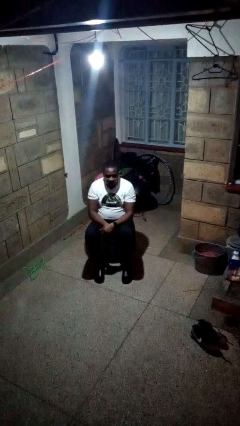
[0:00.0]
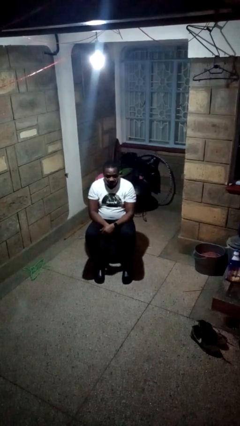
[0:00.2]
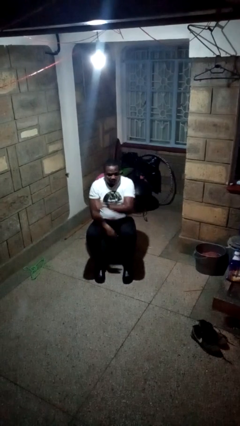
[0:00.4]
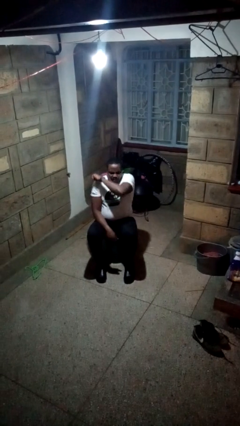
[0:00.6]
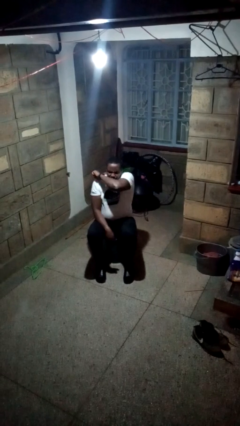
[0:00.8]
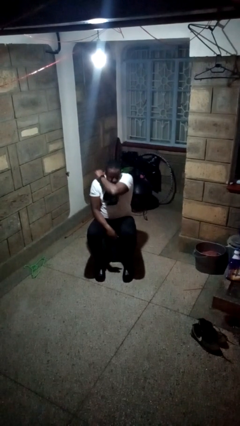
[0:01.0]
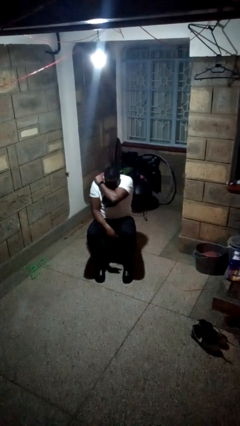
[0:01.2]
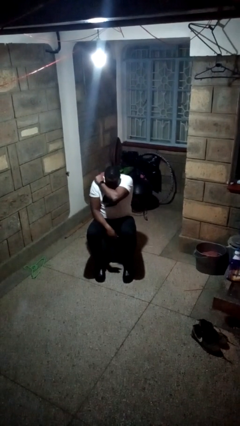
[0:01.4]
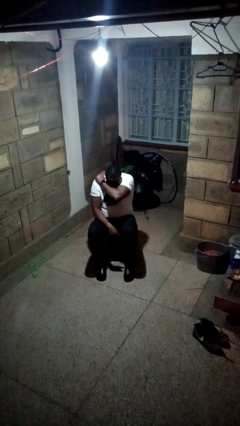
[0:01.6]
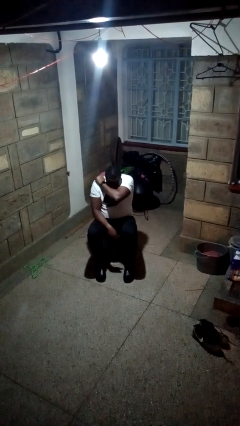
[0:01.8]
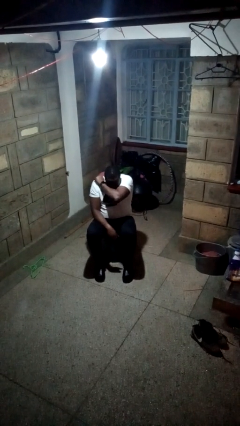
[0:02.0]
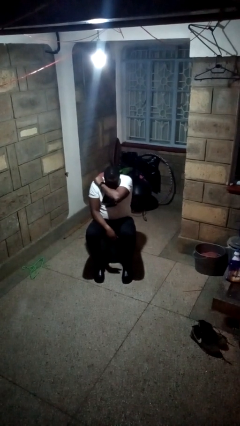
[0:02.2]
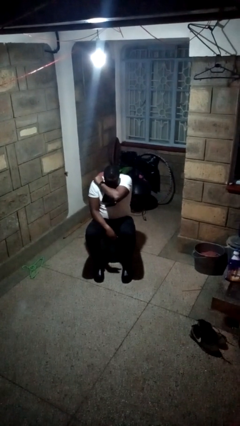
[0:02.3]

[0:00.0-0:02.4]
person sneezes into arm

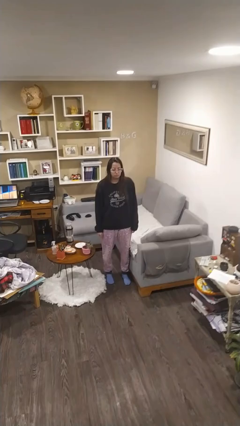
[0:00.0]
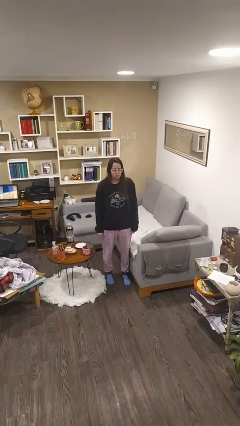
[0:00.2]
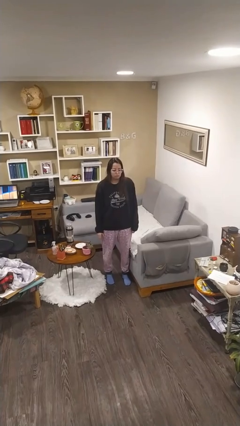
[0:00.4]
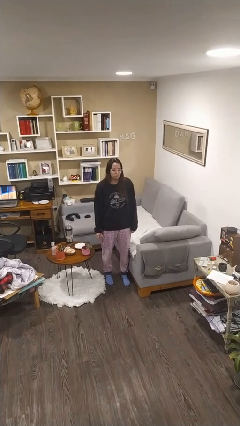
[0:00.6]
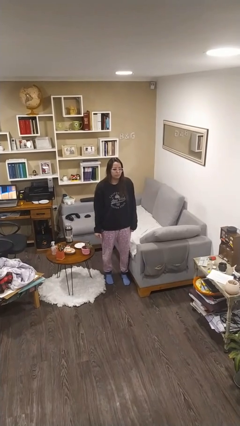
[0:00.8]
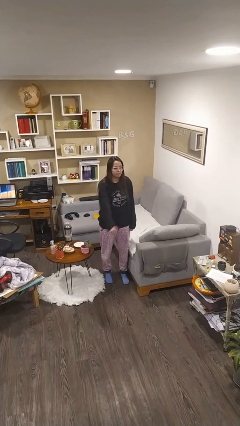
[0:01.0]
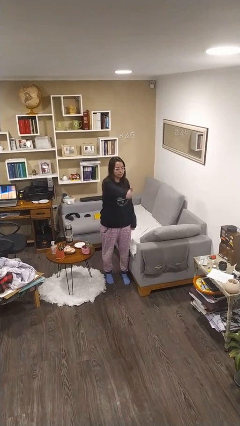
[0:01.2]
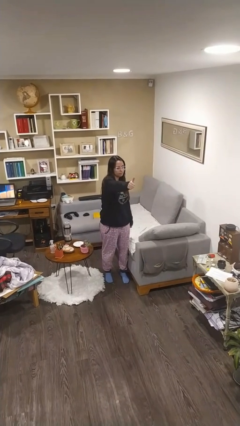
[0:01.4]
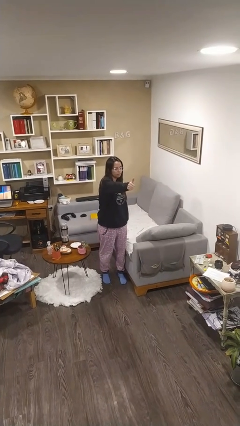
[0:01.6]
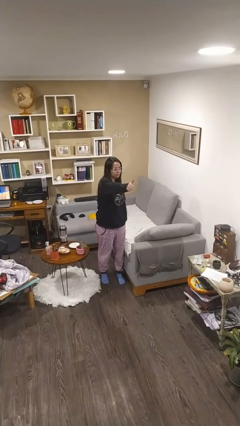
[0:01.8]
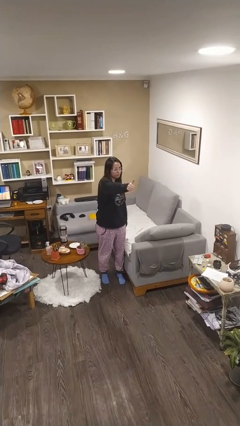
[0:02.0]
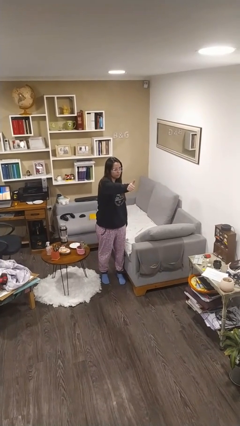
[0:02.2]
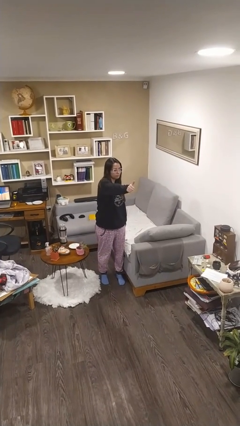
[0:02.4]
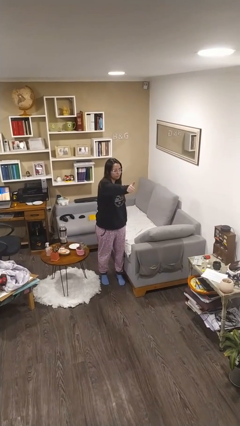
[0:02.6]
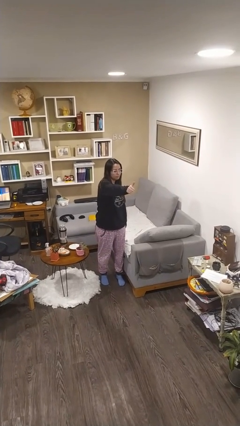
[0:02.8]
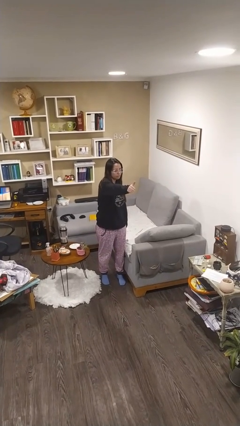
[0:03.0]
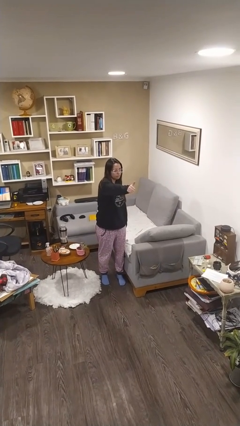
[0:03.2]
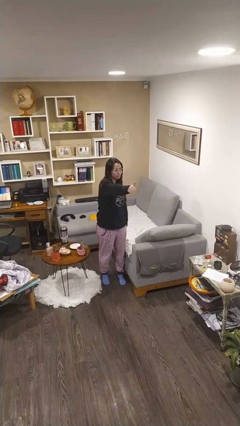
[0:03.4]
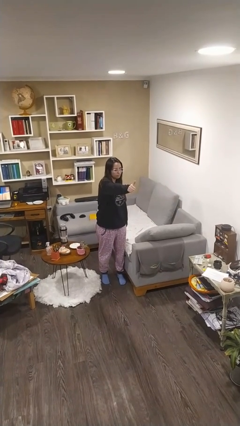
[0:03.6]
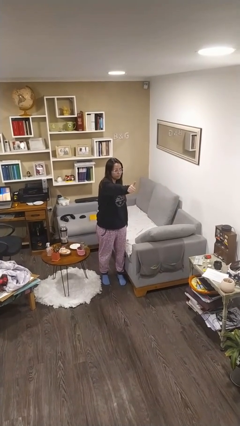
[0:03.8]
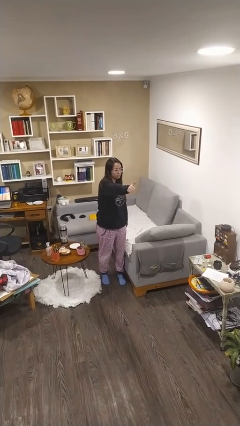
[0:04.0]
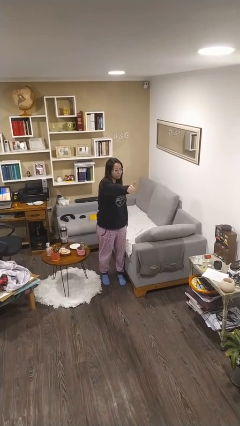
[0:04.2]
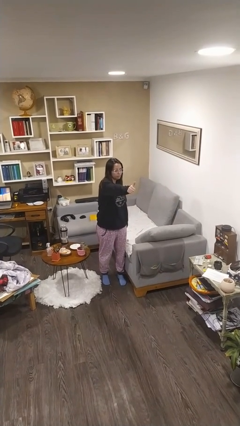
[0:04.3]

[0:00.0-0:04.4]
person gestures thumbs up

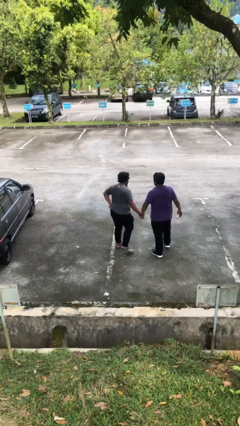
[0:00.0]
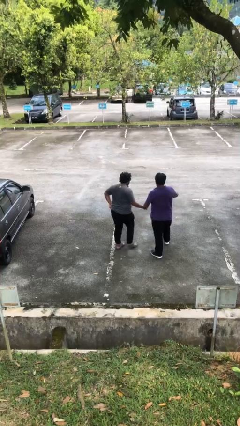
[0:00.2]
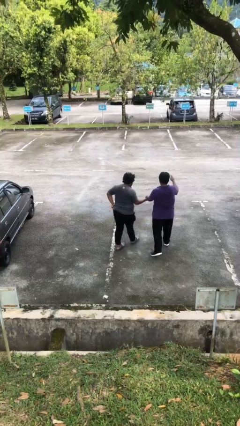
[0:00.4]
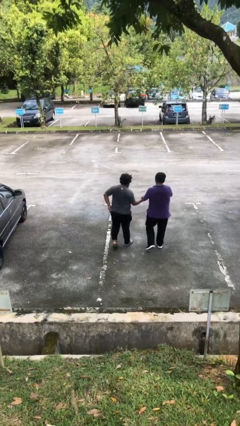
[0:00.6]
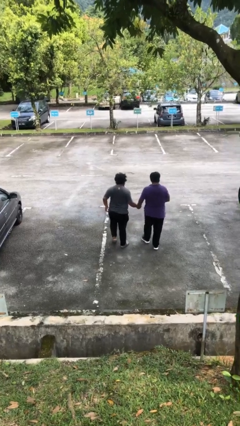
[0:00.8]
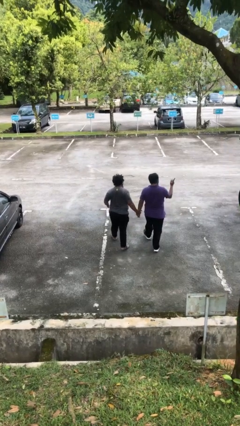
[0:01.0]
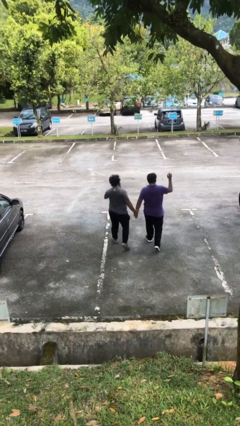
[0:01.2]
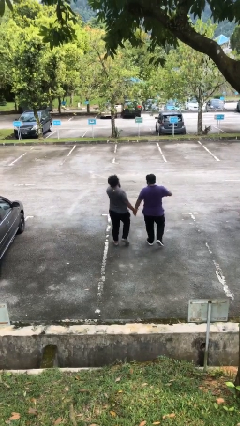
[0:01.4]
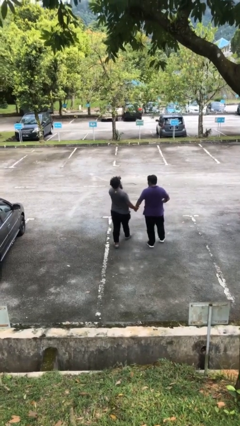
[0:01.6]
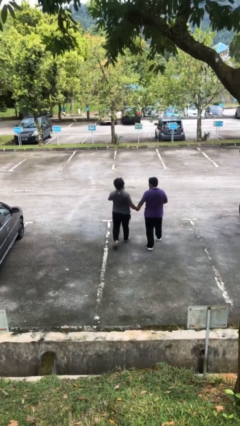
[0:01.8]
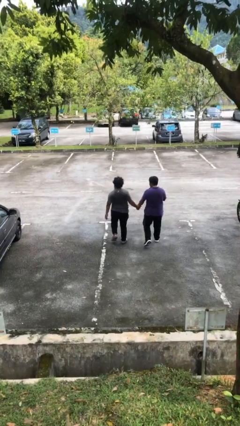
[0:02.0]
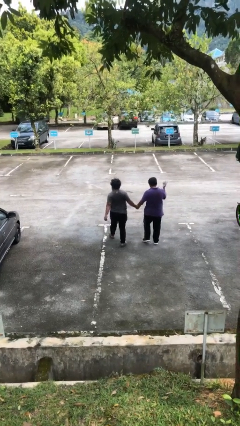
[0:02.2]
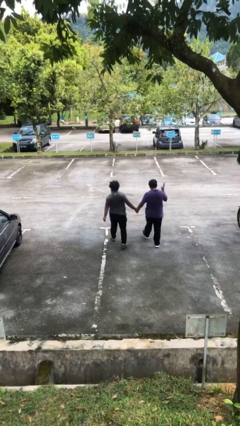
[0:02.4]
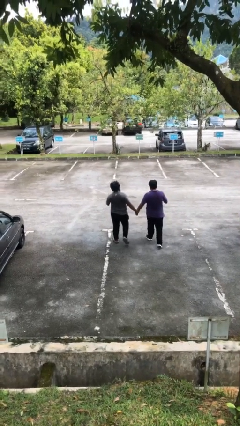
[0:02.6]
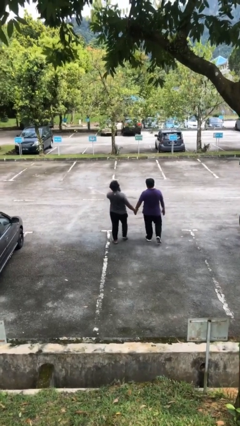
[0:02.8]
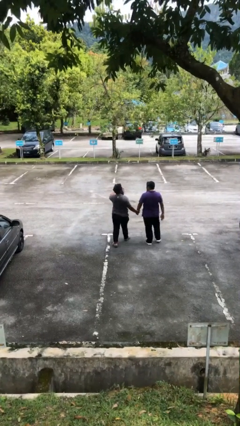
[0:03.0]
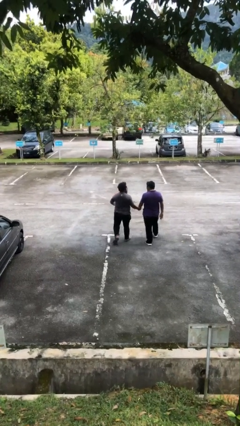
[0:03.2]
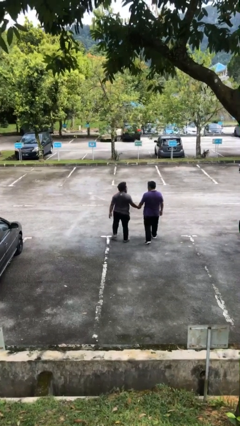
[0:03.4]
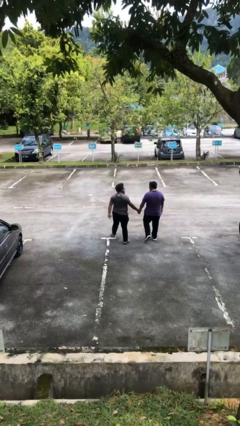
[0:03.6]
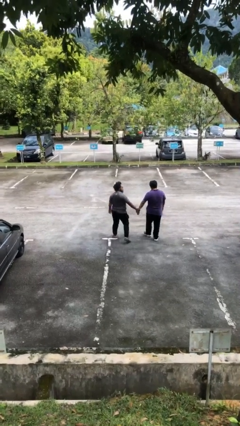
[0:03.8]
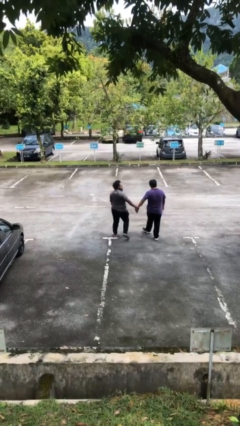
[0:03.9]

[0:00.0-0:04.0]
person holds hand

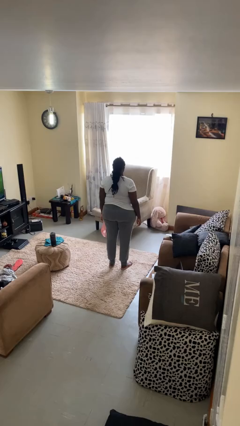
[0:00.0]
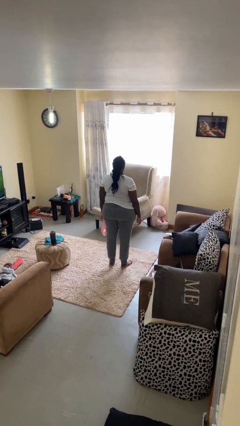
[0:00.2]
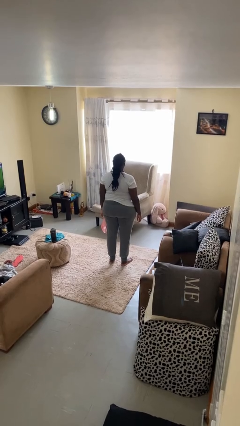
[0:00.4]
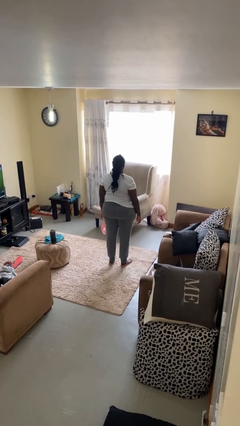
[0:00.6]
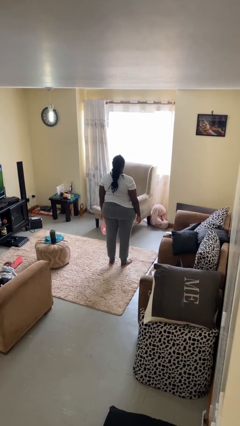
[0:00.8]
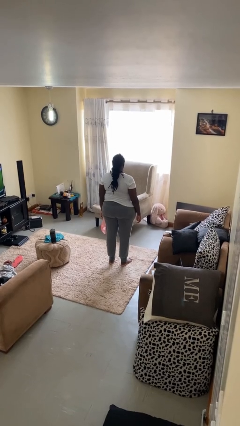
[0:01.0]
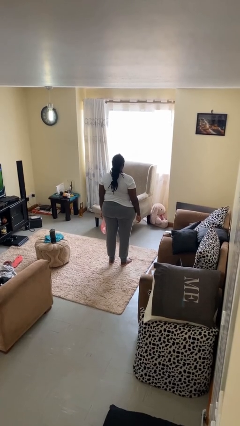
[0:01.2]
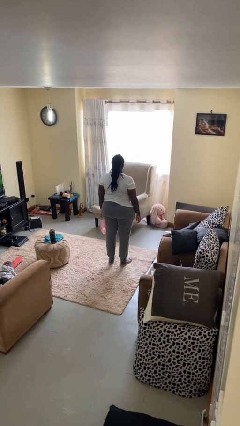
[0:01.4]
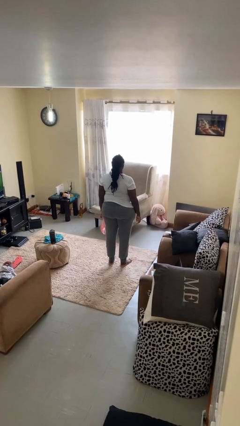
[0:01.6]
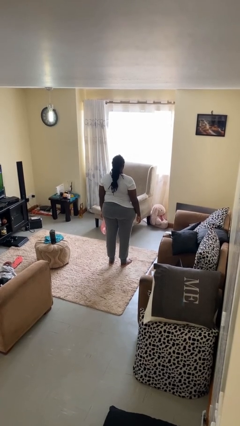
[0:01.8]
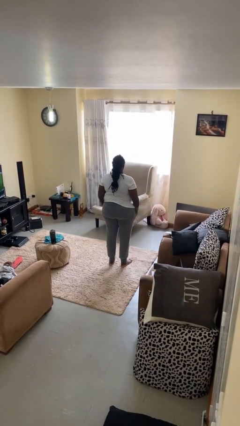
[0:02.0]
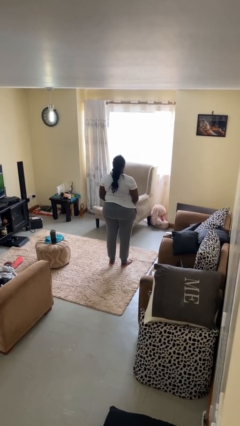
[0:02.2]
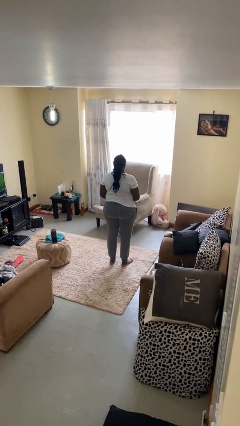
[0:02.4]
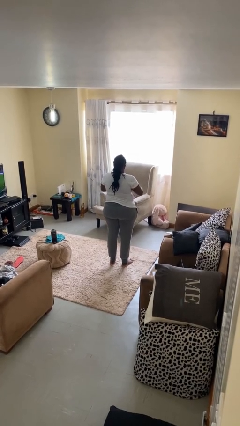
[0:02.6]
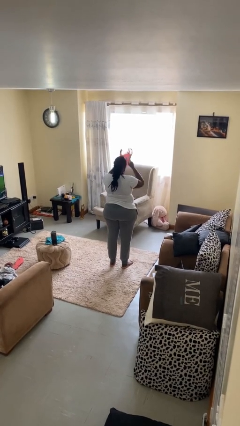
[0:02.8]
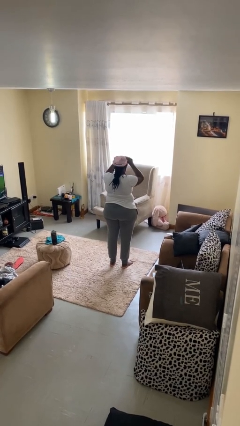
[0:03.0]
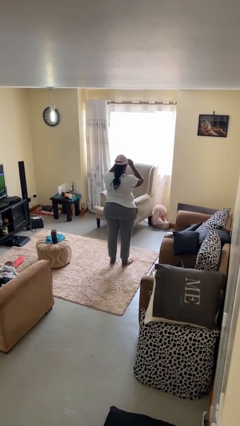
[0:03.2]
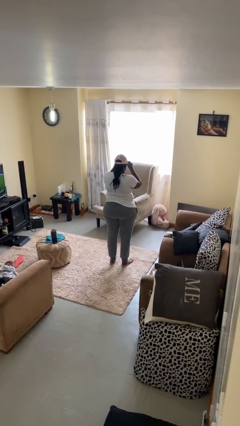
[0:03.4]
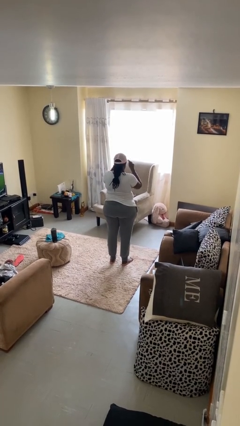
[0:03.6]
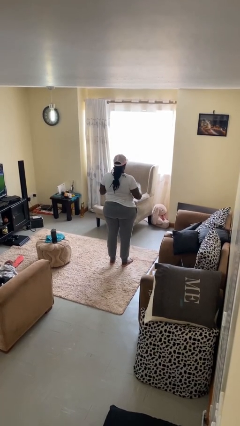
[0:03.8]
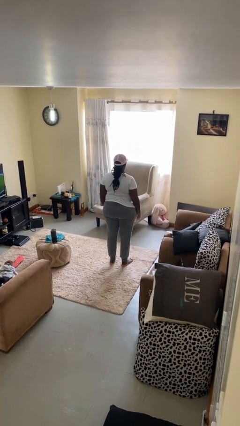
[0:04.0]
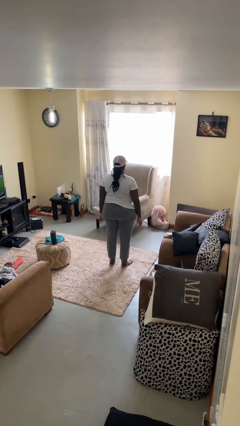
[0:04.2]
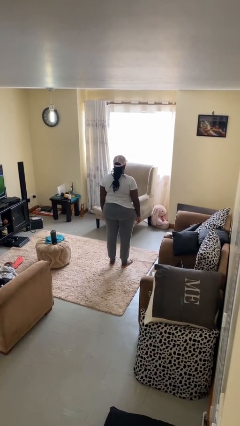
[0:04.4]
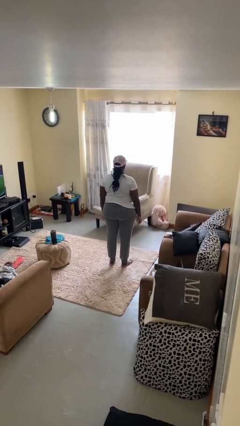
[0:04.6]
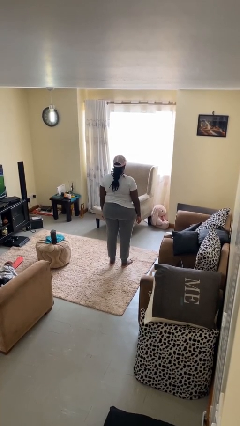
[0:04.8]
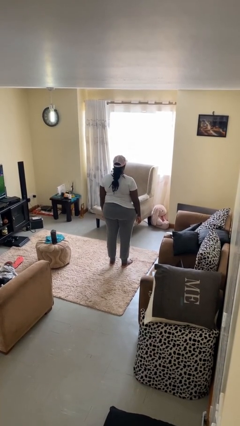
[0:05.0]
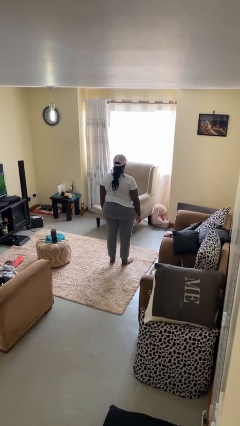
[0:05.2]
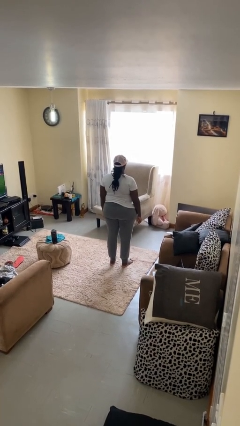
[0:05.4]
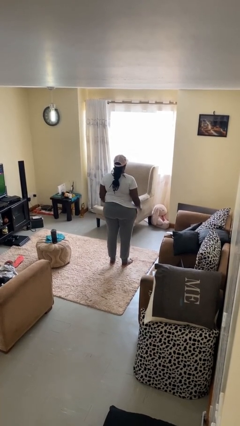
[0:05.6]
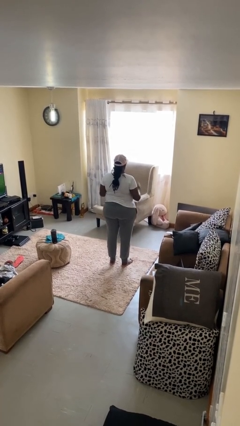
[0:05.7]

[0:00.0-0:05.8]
person puts on hat

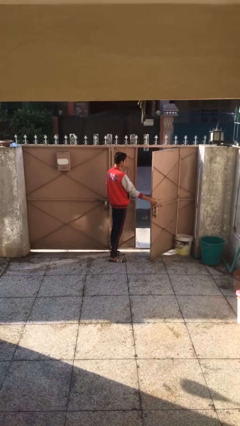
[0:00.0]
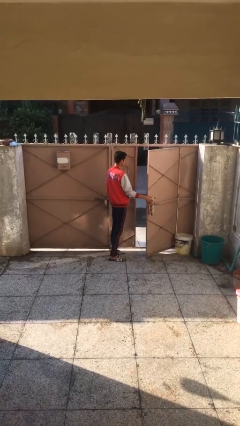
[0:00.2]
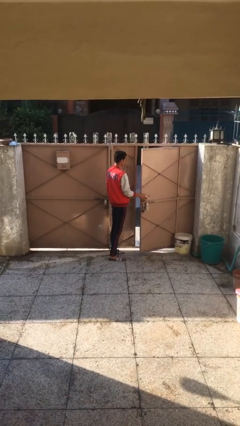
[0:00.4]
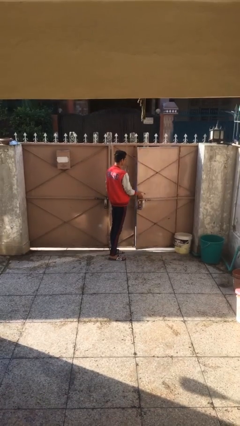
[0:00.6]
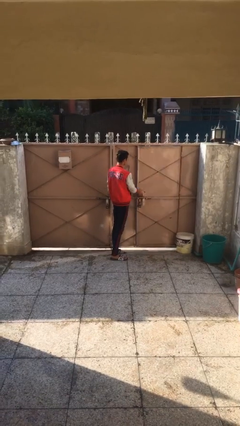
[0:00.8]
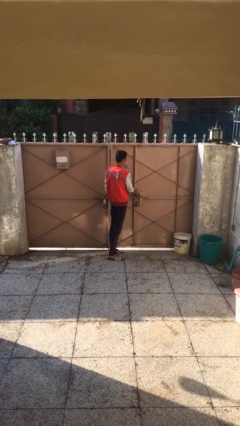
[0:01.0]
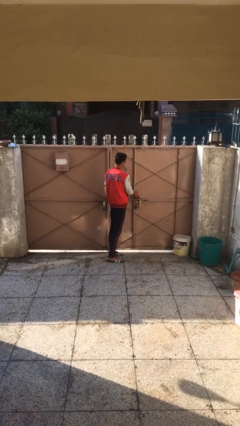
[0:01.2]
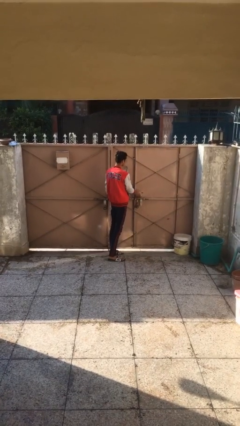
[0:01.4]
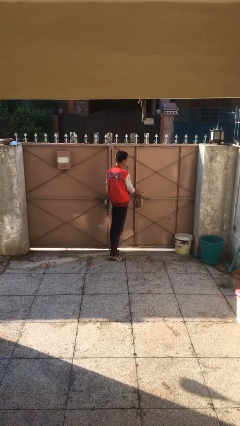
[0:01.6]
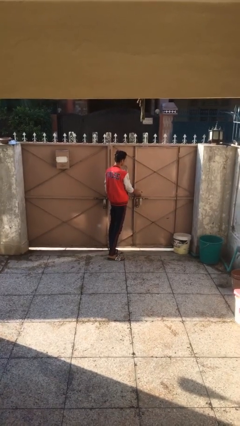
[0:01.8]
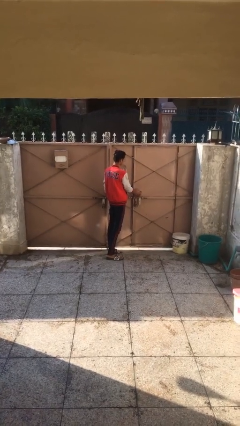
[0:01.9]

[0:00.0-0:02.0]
person closes facility door
